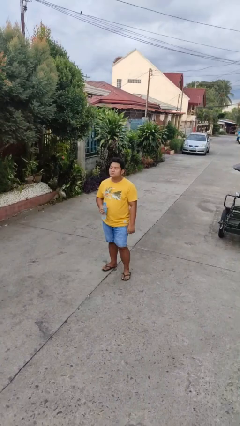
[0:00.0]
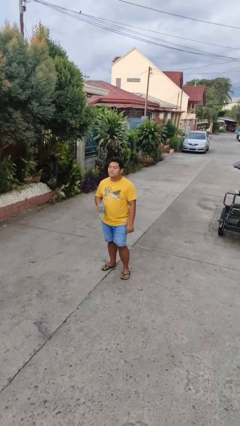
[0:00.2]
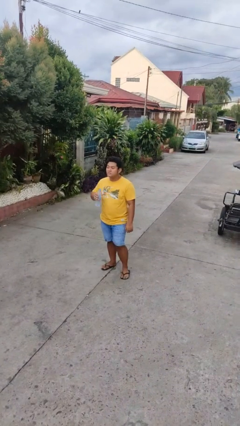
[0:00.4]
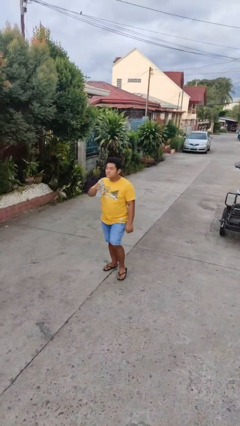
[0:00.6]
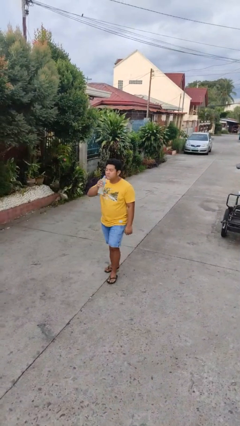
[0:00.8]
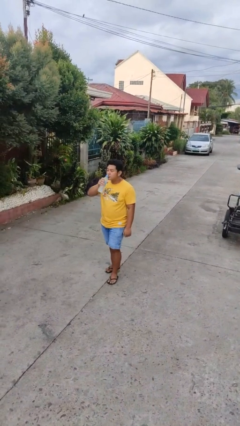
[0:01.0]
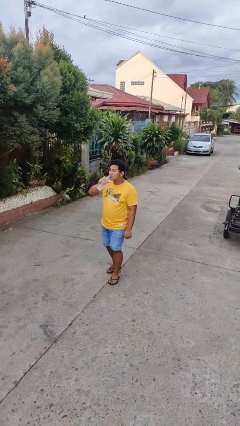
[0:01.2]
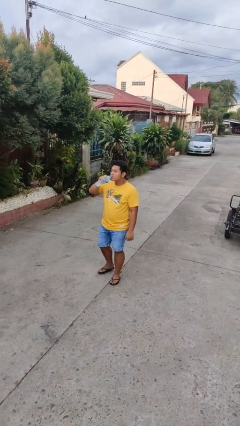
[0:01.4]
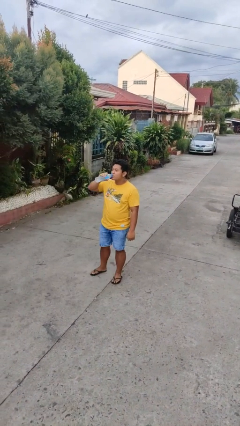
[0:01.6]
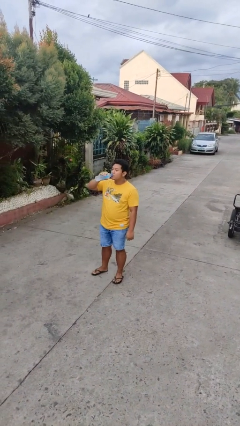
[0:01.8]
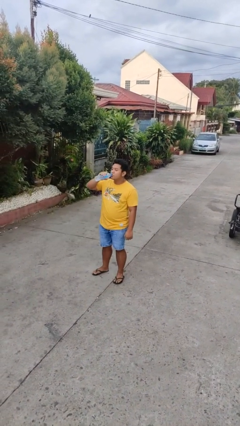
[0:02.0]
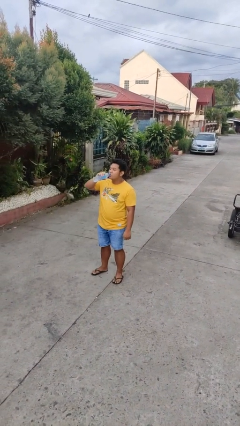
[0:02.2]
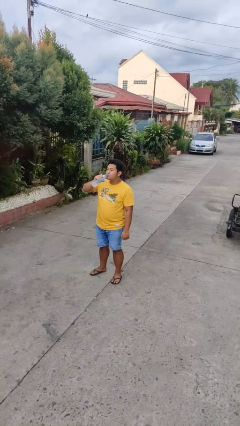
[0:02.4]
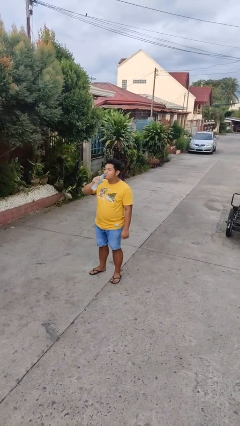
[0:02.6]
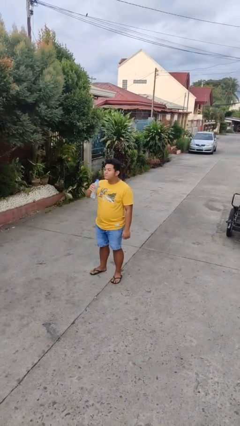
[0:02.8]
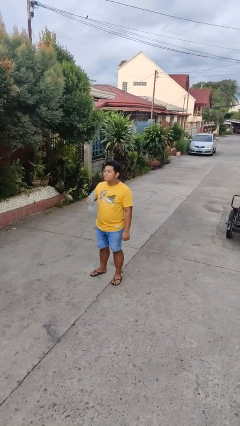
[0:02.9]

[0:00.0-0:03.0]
person drinks from bottle

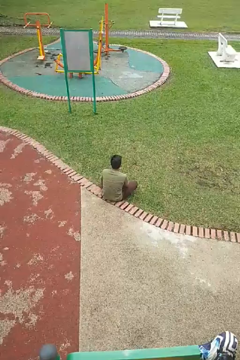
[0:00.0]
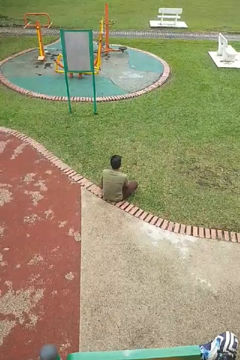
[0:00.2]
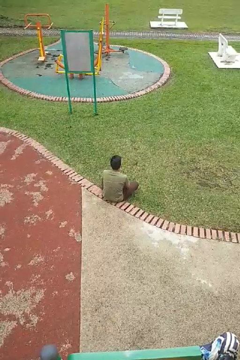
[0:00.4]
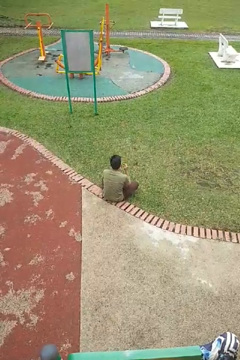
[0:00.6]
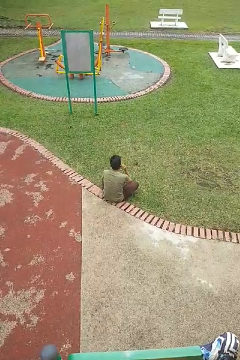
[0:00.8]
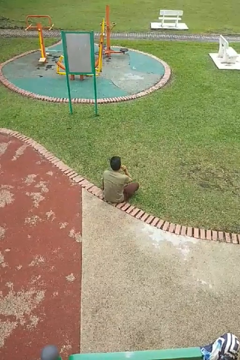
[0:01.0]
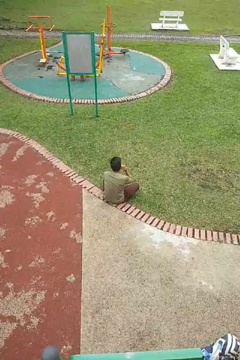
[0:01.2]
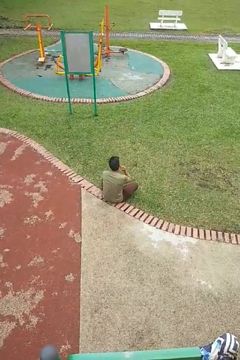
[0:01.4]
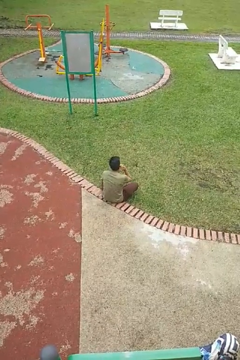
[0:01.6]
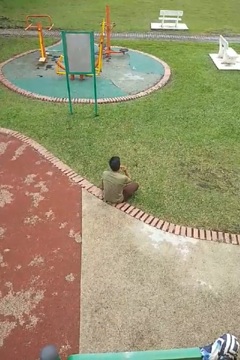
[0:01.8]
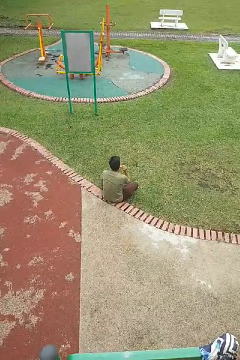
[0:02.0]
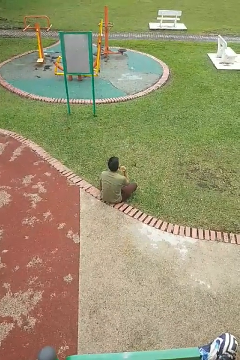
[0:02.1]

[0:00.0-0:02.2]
person touches earlobe

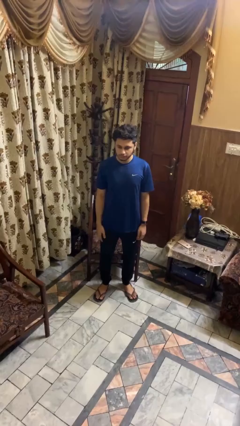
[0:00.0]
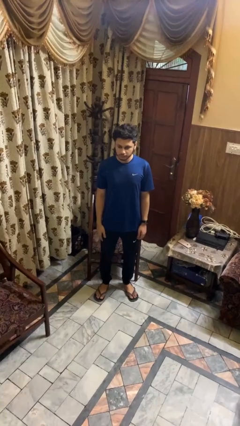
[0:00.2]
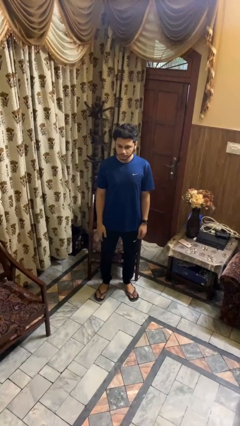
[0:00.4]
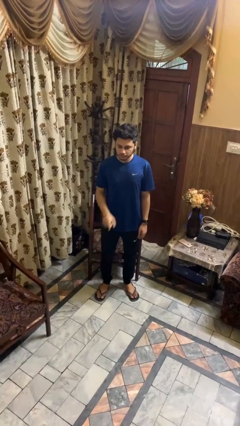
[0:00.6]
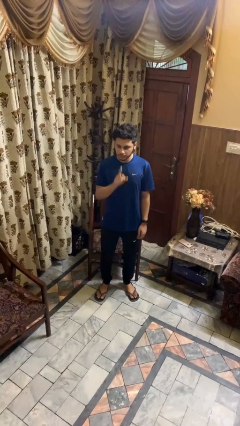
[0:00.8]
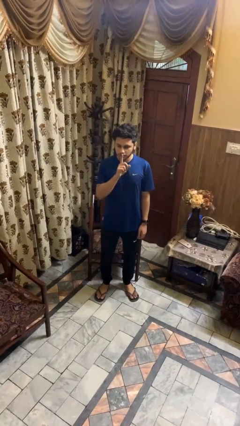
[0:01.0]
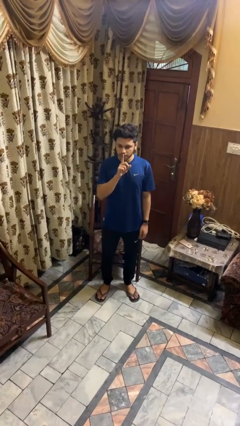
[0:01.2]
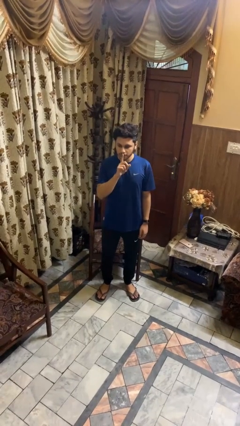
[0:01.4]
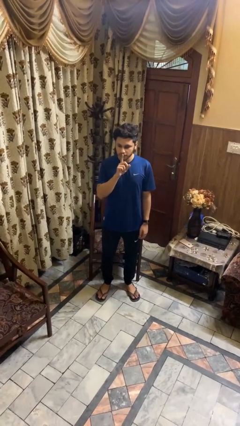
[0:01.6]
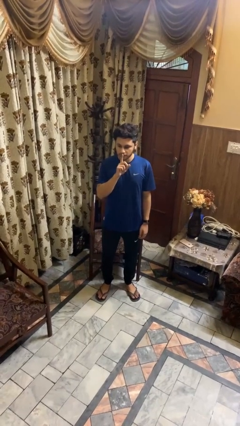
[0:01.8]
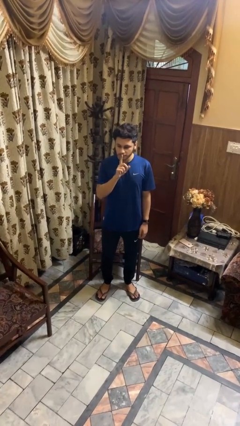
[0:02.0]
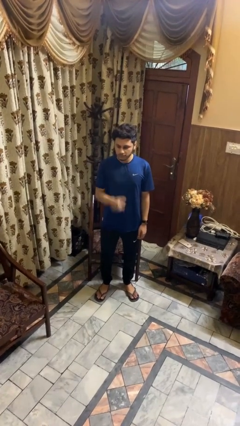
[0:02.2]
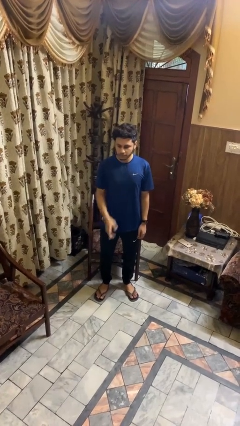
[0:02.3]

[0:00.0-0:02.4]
person gestures be quiet

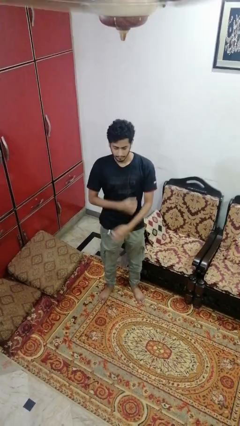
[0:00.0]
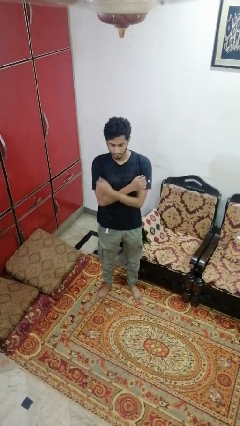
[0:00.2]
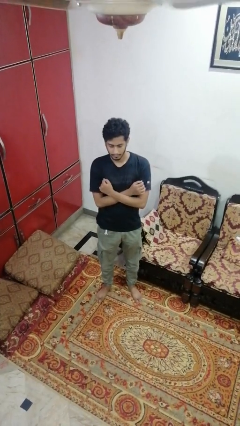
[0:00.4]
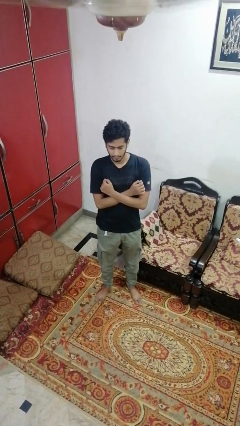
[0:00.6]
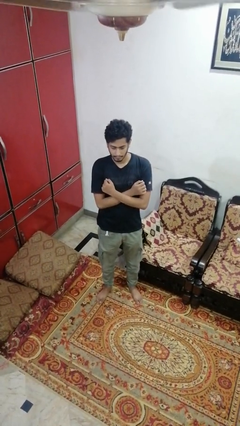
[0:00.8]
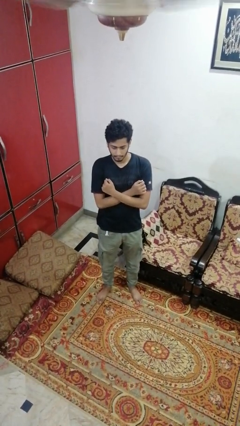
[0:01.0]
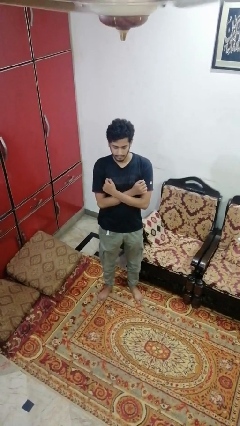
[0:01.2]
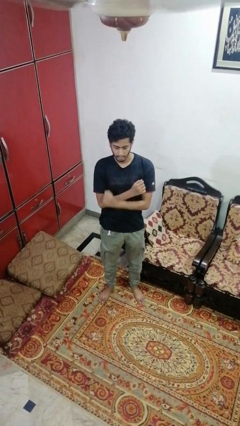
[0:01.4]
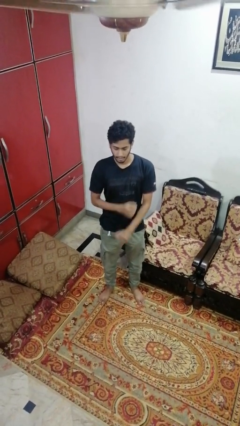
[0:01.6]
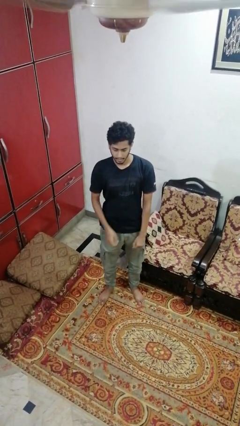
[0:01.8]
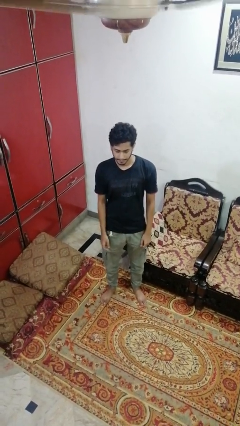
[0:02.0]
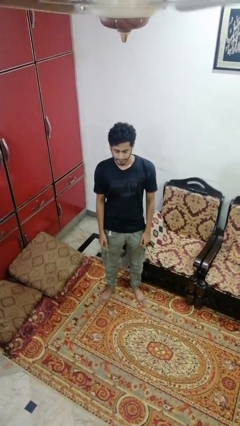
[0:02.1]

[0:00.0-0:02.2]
person crosses arms

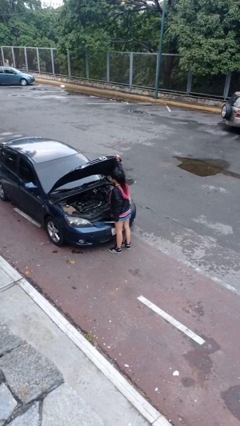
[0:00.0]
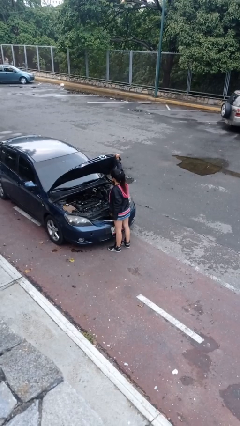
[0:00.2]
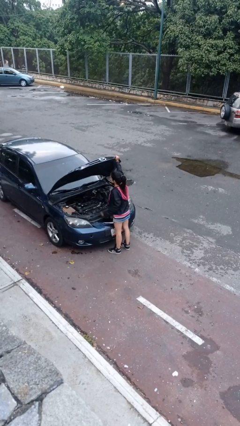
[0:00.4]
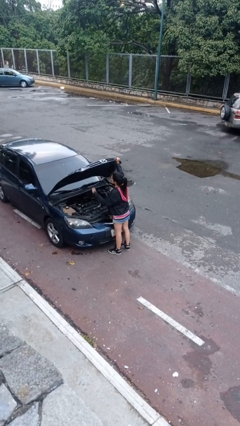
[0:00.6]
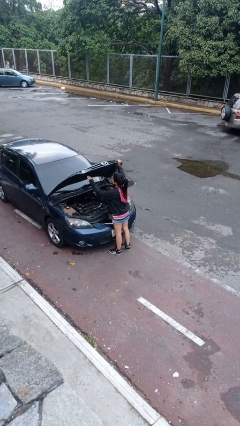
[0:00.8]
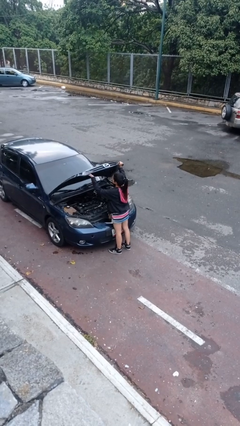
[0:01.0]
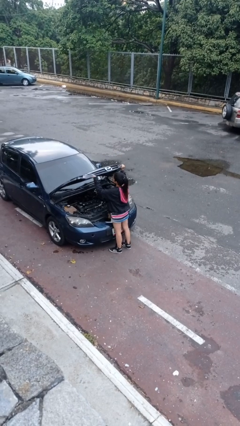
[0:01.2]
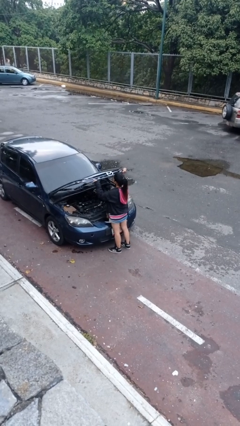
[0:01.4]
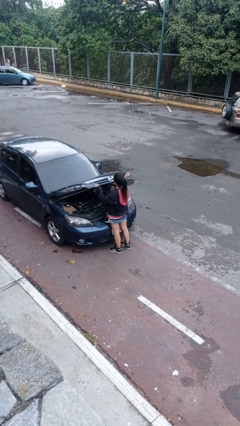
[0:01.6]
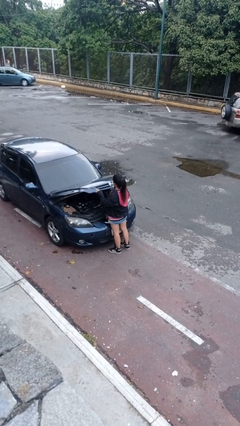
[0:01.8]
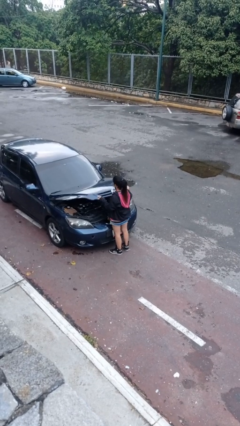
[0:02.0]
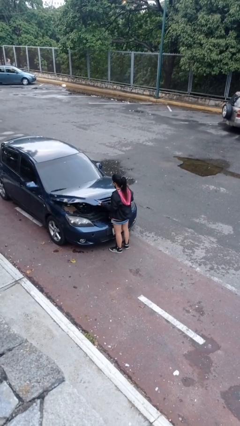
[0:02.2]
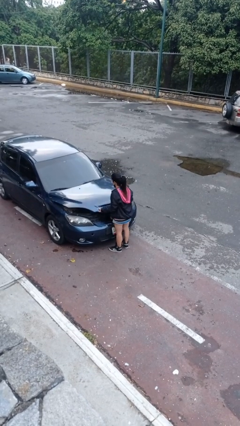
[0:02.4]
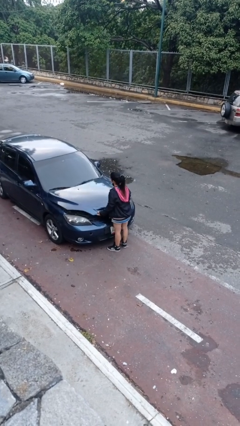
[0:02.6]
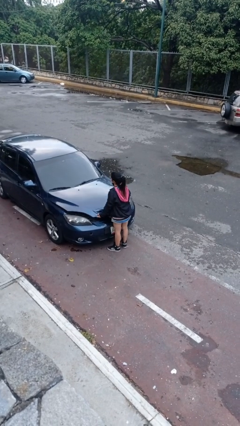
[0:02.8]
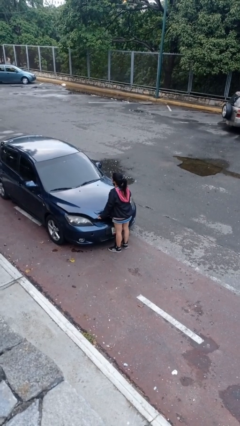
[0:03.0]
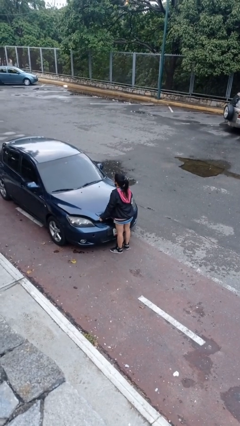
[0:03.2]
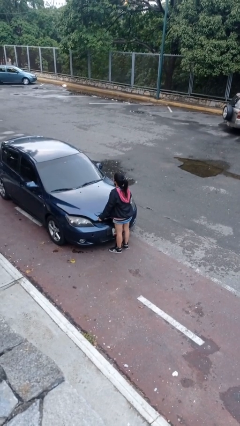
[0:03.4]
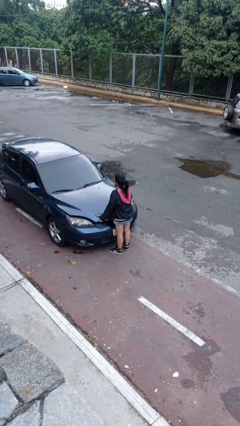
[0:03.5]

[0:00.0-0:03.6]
person closes car hood

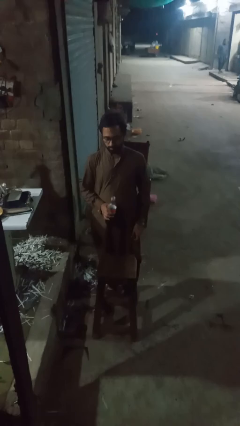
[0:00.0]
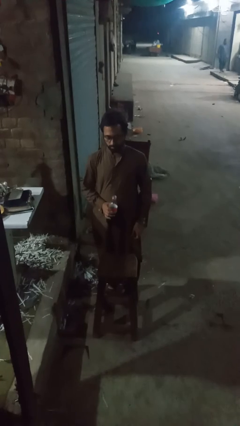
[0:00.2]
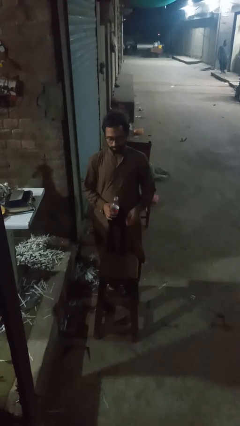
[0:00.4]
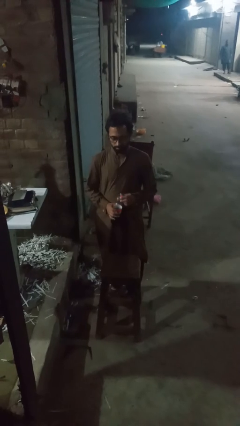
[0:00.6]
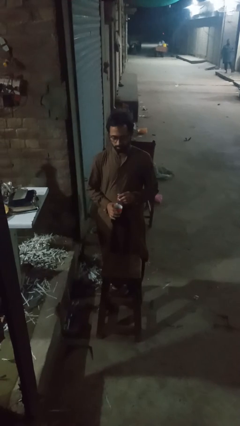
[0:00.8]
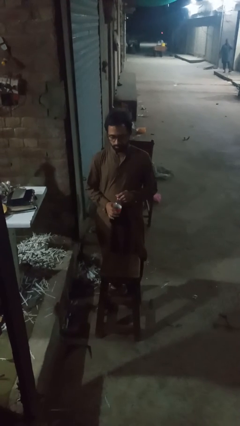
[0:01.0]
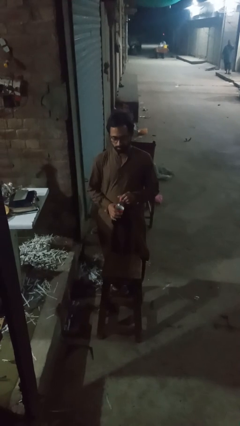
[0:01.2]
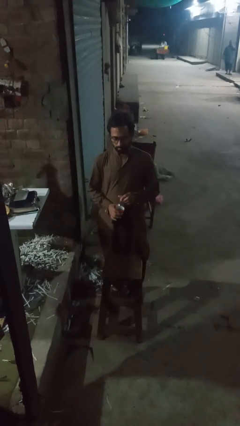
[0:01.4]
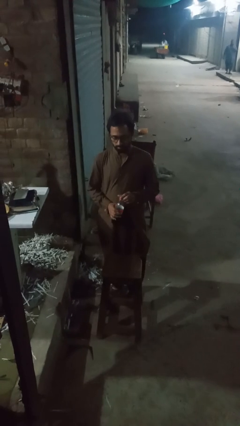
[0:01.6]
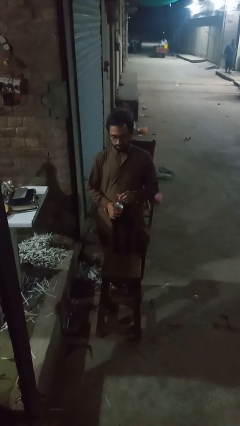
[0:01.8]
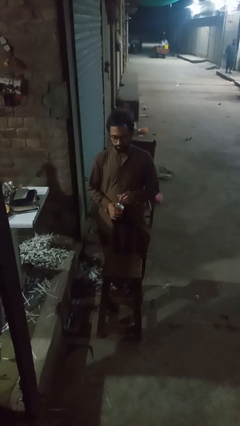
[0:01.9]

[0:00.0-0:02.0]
person screws lid to bottle

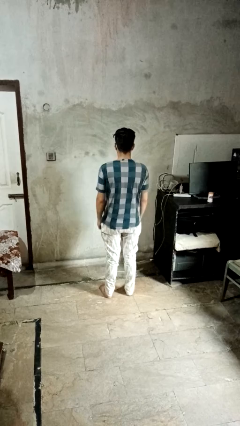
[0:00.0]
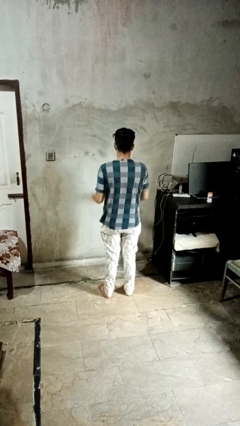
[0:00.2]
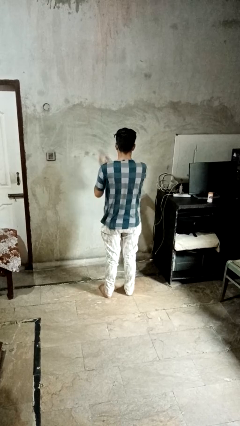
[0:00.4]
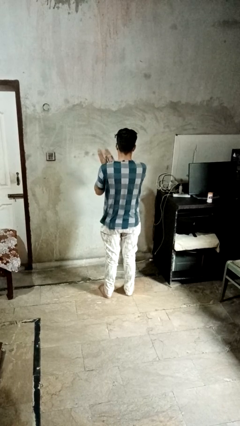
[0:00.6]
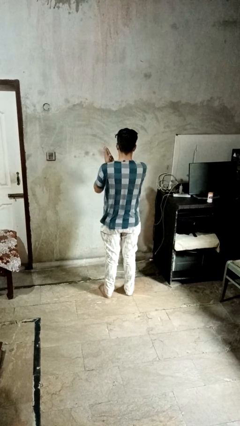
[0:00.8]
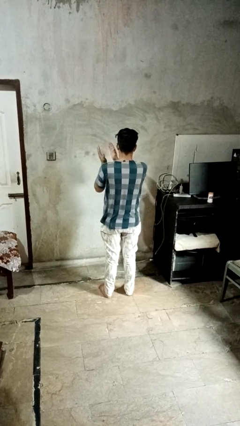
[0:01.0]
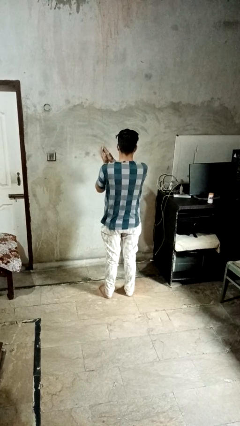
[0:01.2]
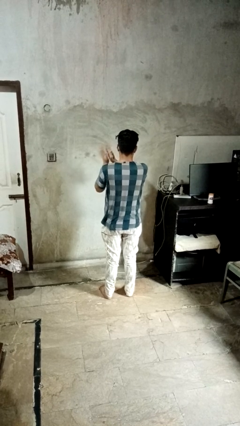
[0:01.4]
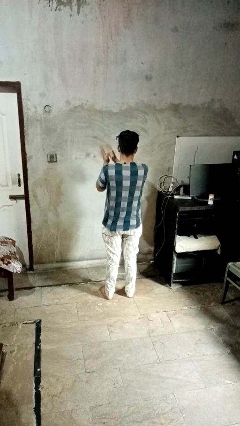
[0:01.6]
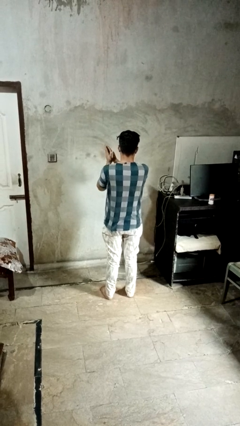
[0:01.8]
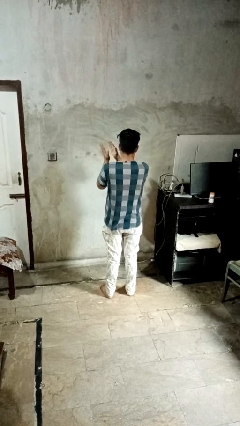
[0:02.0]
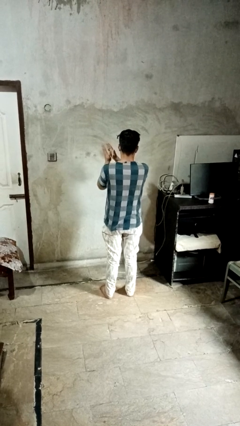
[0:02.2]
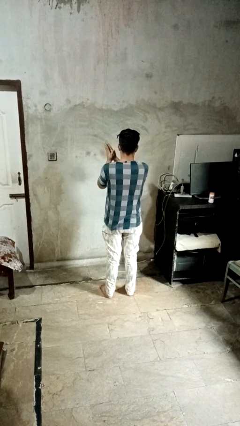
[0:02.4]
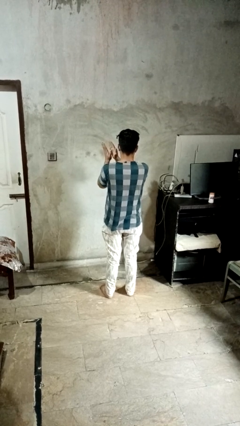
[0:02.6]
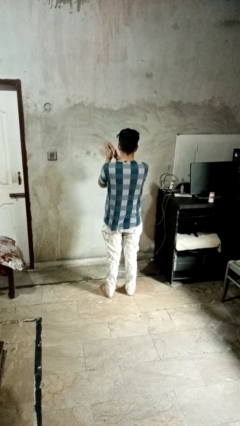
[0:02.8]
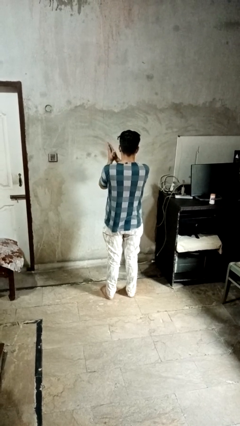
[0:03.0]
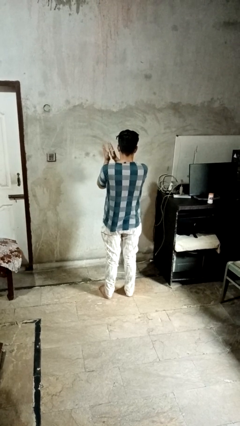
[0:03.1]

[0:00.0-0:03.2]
person claps hands
